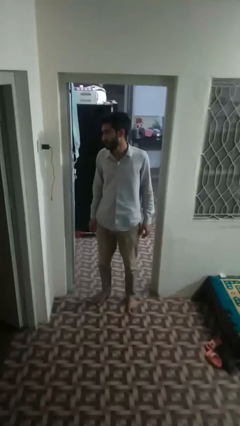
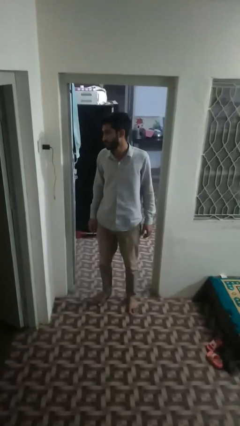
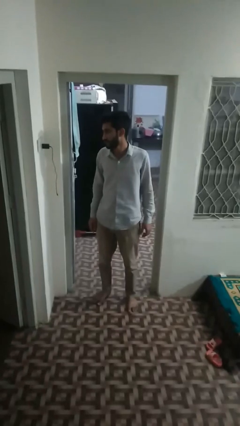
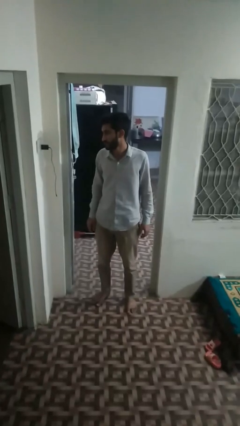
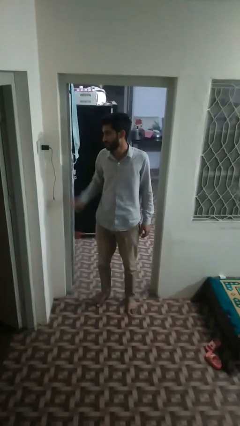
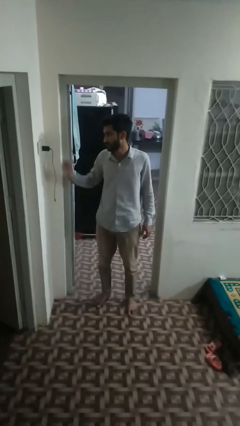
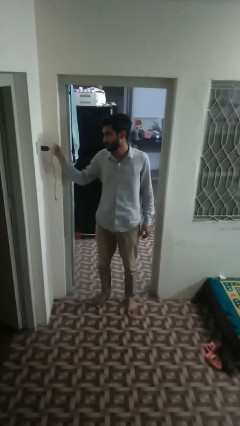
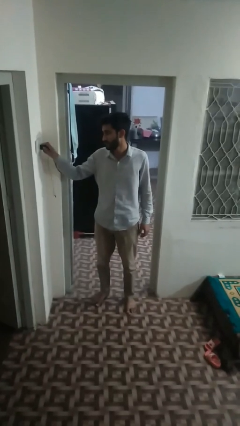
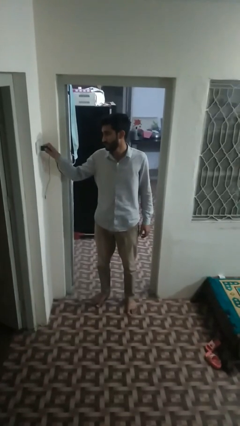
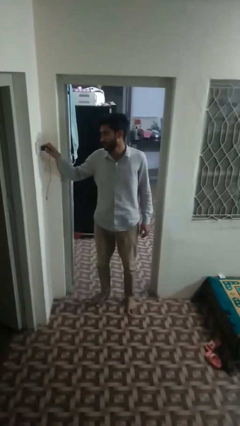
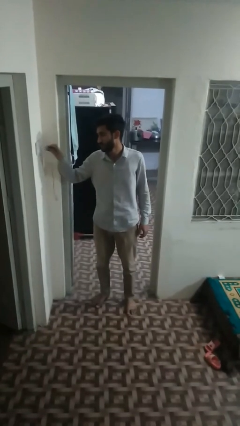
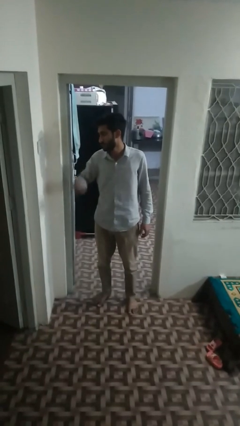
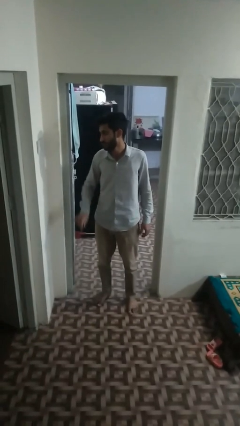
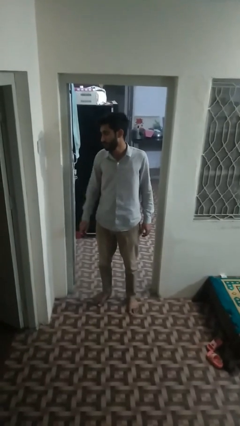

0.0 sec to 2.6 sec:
person unplugs from electrical socket

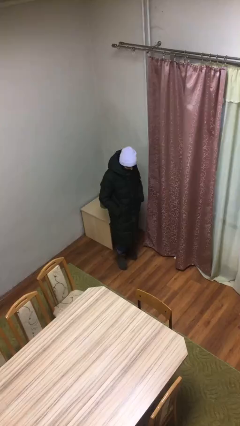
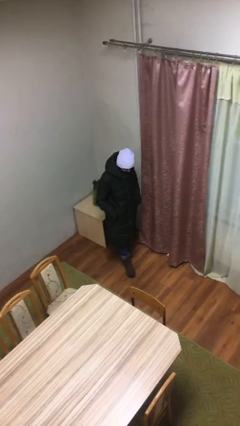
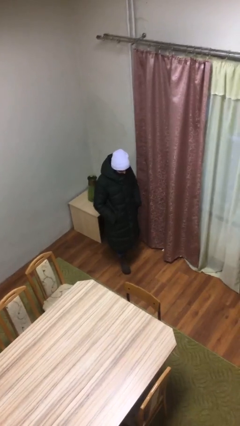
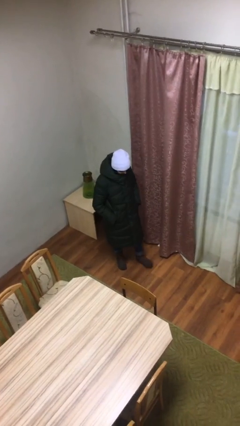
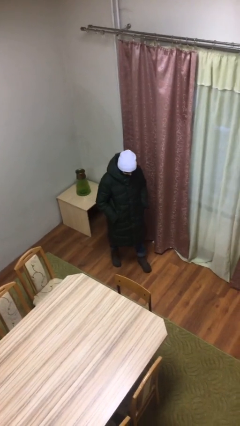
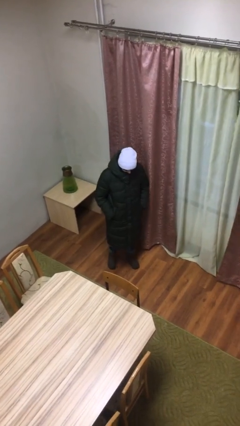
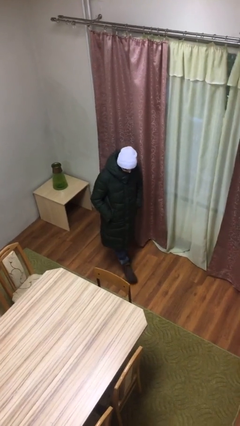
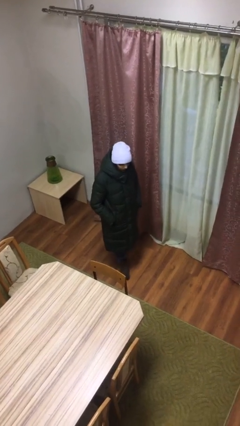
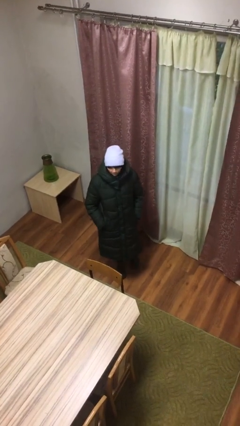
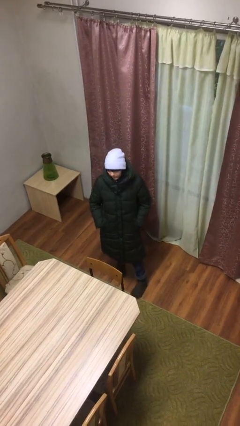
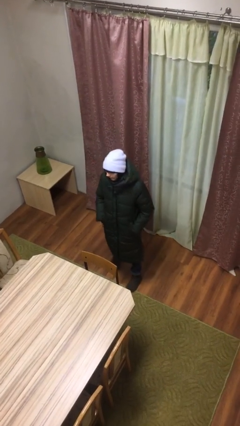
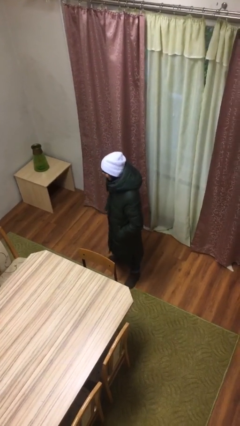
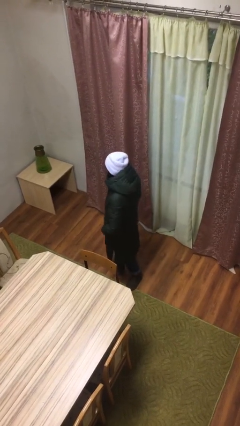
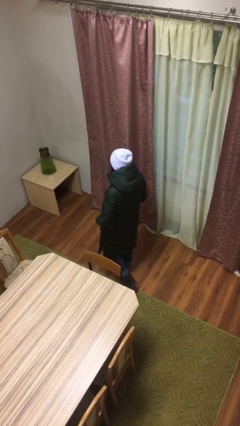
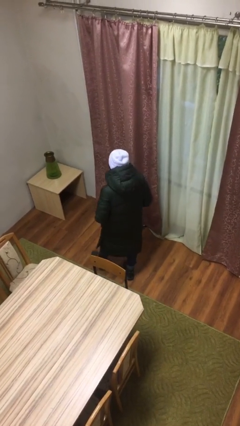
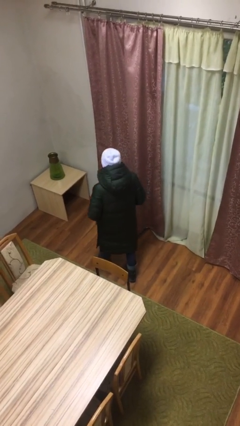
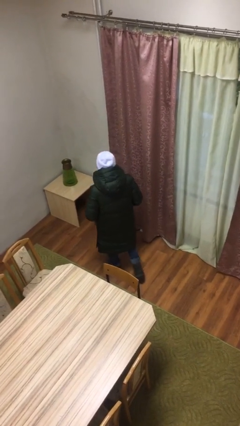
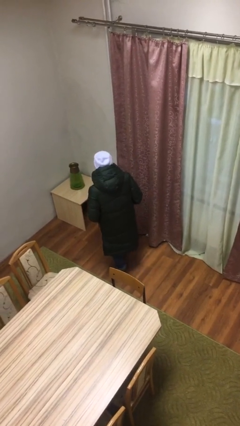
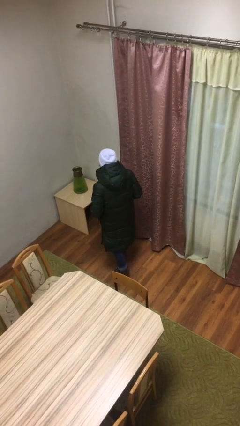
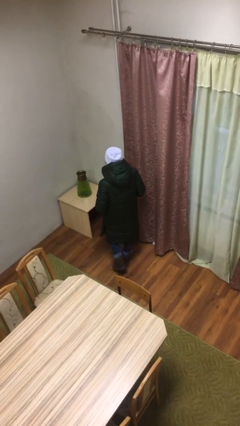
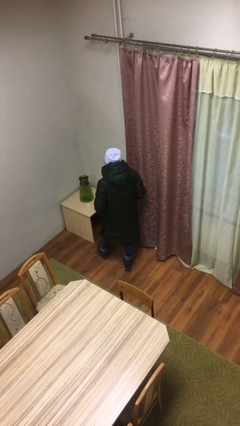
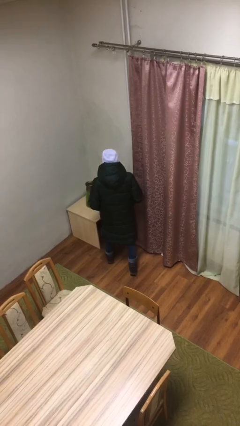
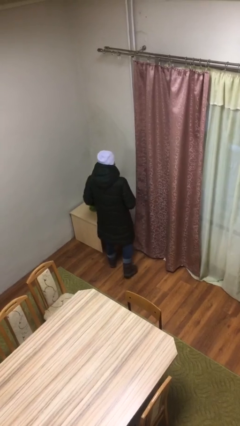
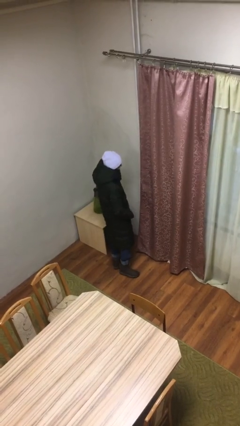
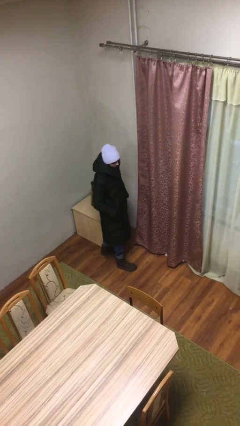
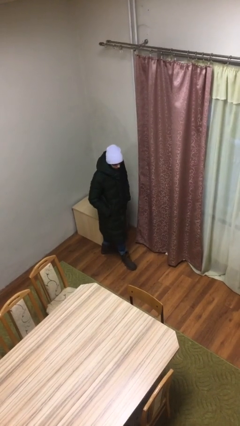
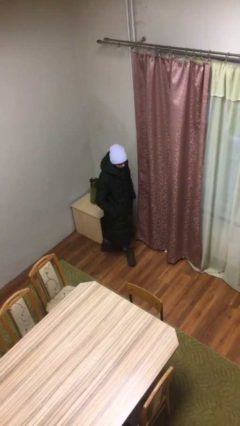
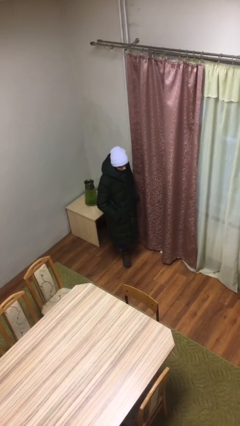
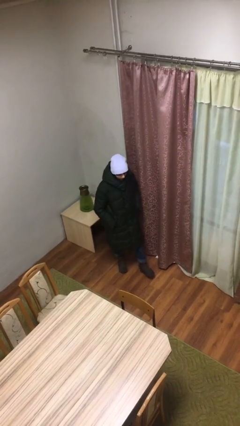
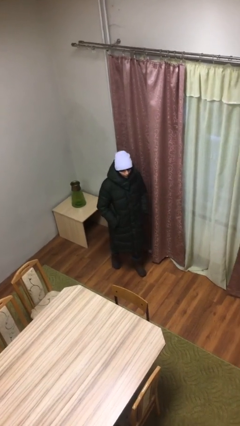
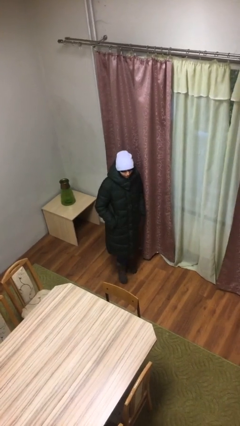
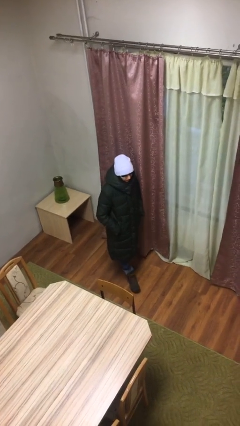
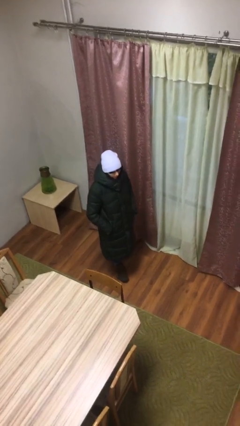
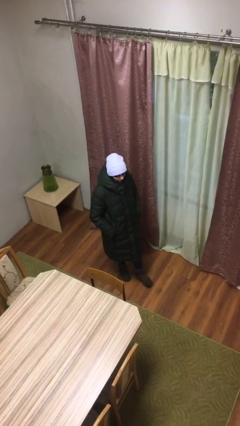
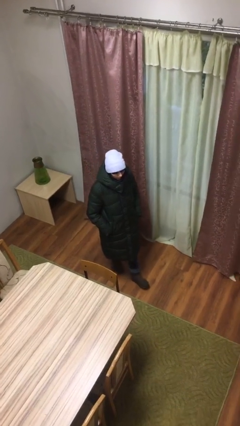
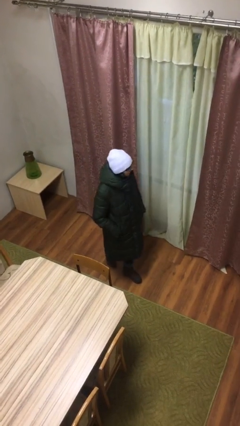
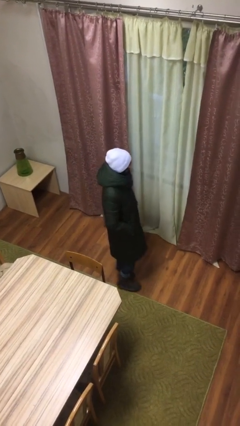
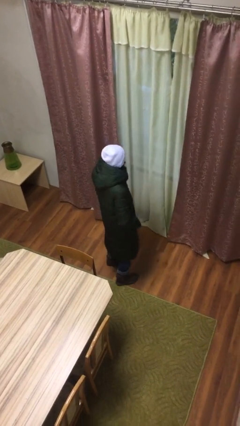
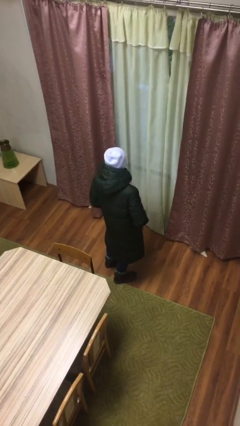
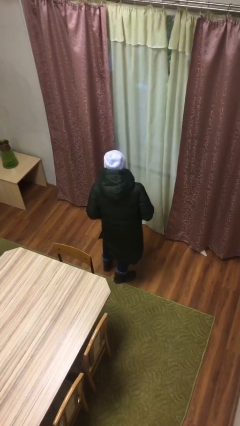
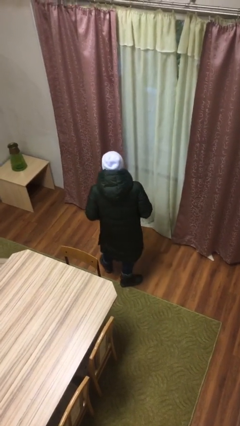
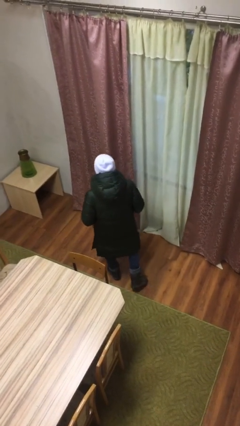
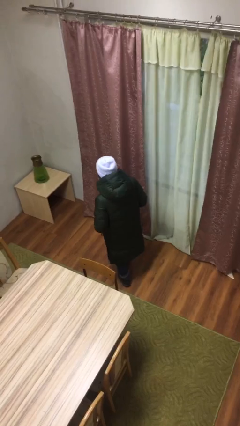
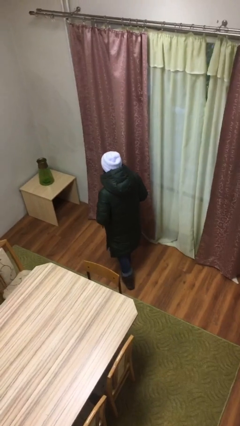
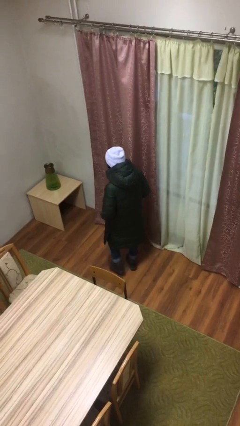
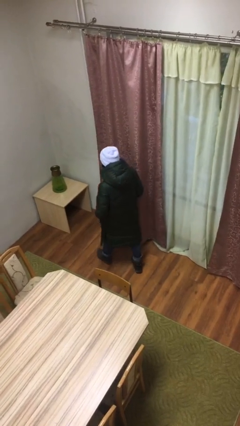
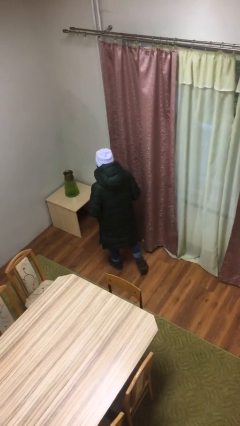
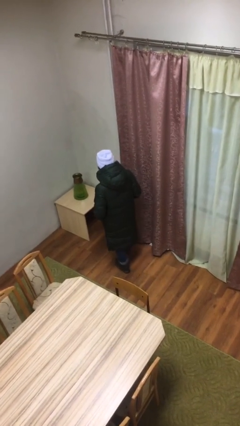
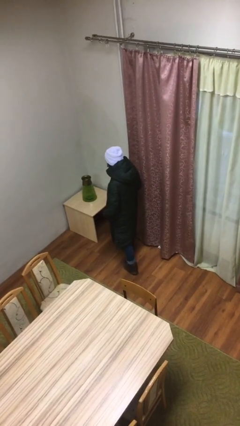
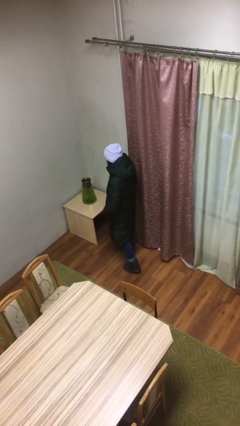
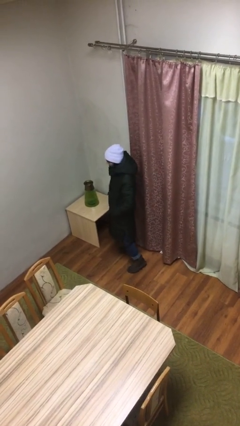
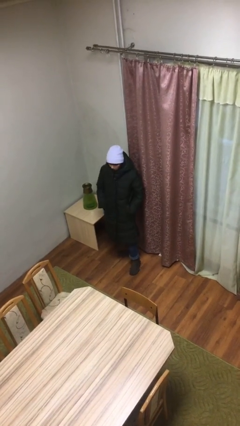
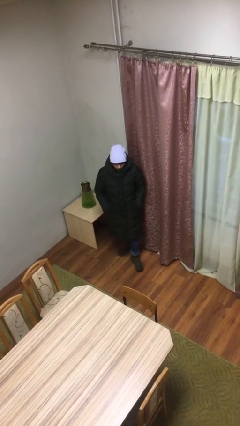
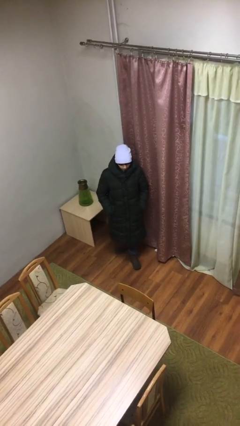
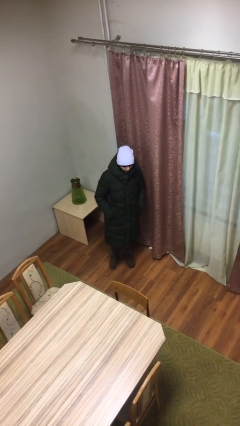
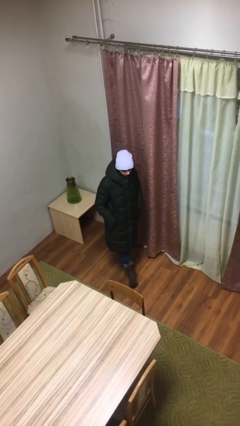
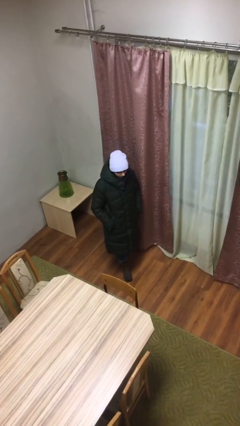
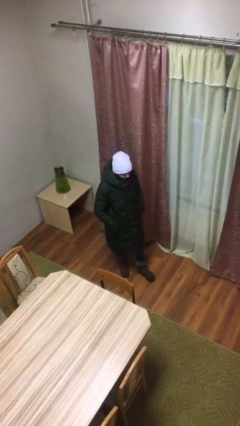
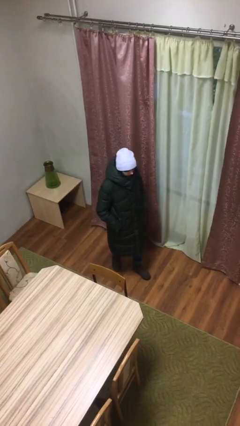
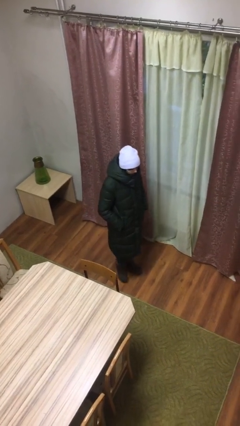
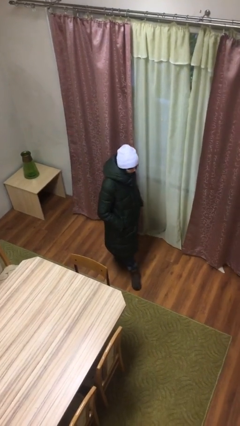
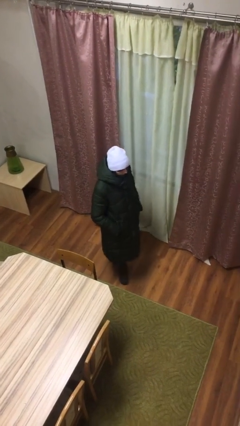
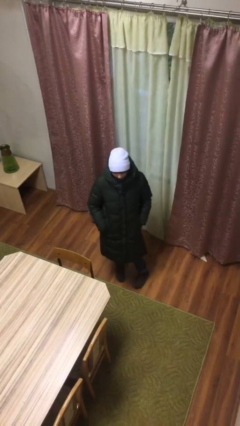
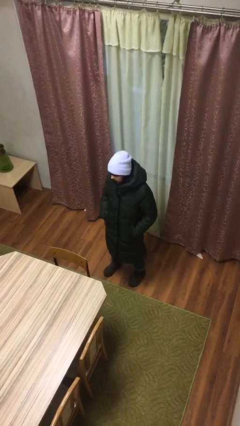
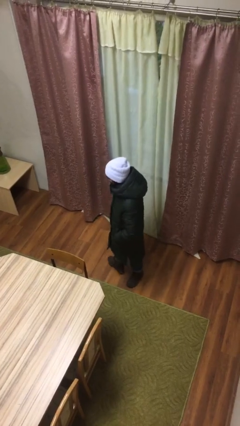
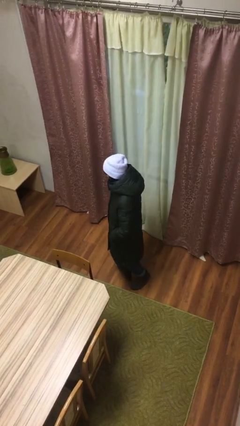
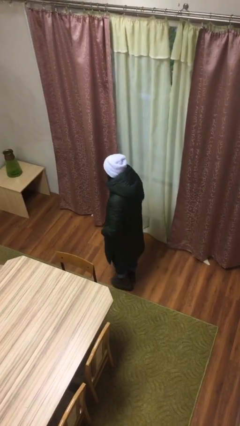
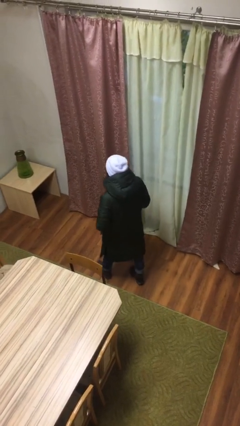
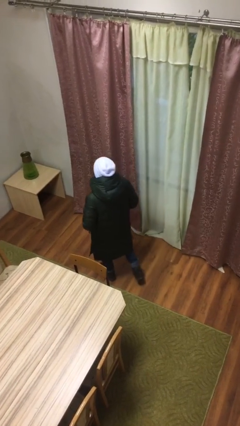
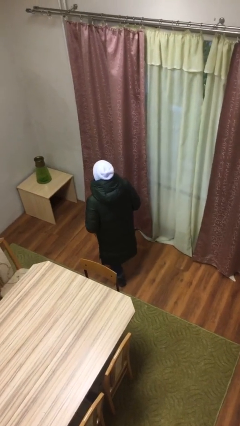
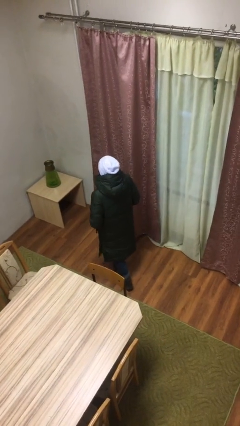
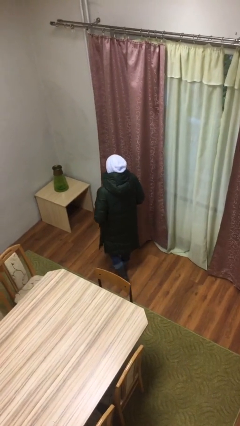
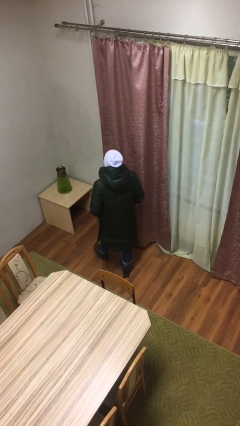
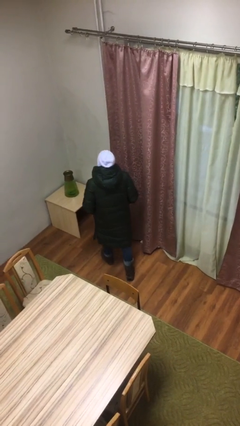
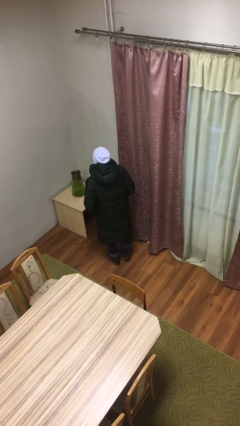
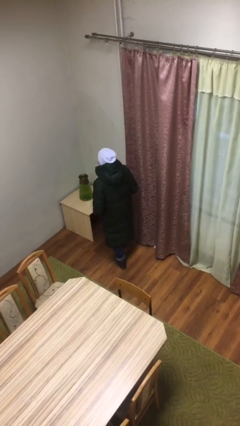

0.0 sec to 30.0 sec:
person walks

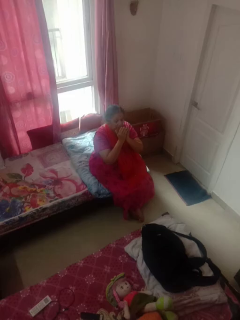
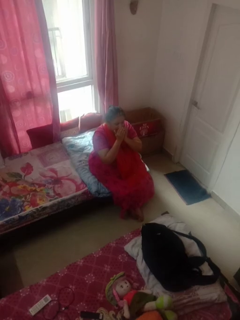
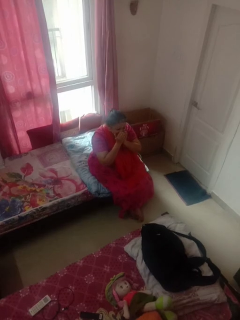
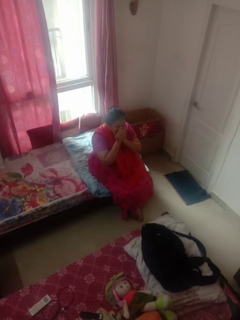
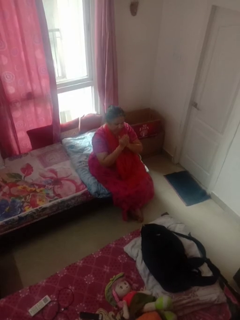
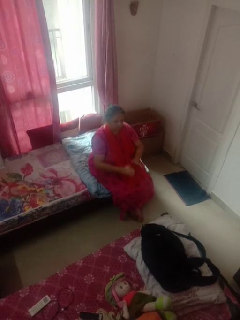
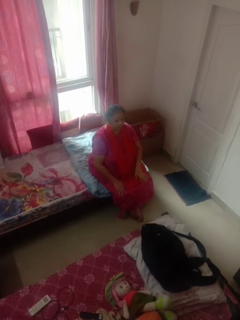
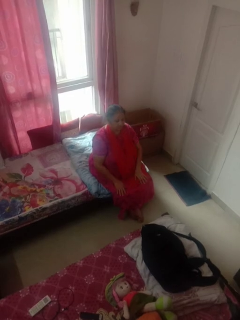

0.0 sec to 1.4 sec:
person sneezes into hand
